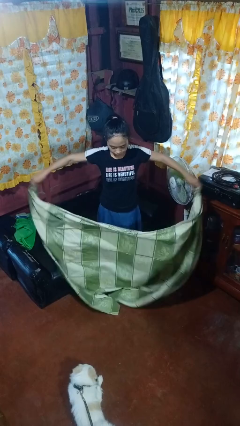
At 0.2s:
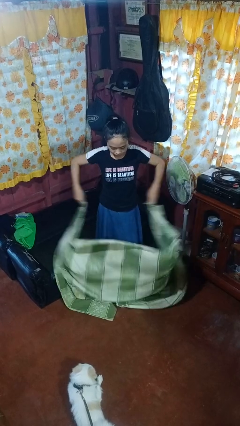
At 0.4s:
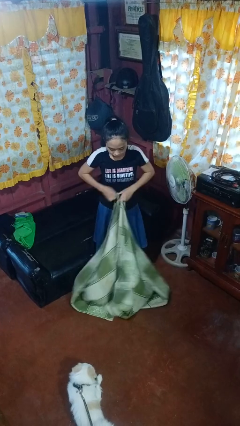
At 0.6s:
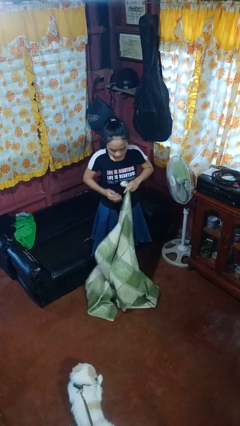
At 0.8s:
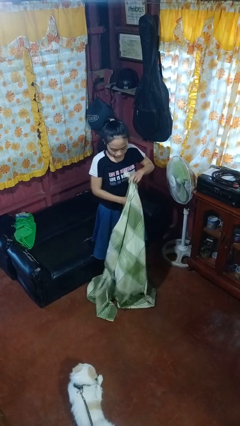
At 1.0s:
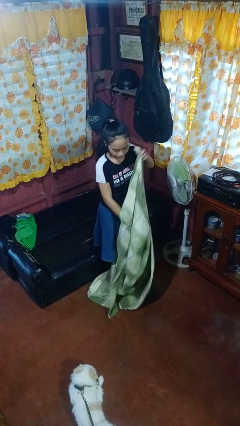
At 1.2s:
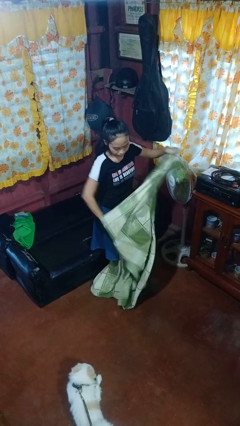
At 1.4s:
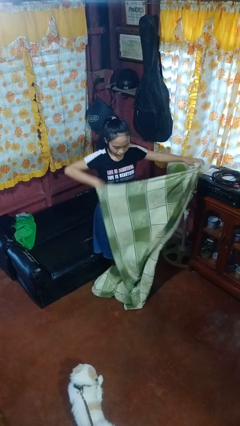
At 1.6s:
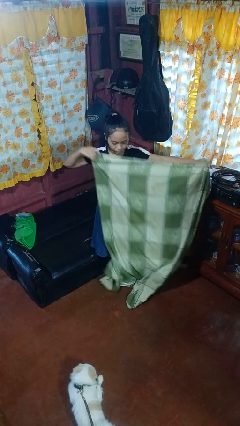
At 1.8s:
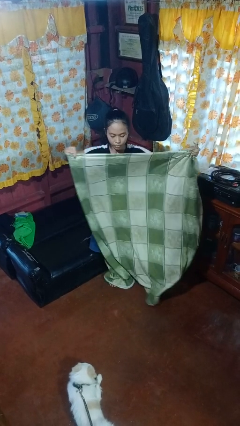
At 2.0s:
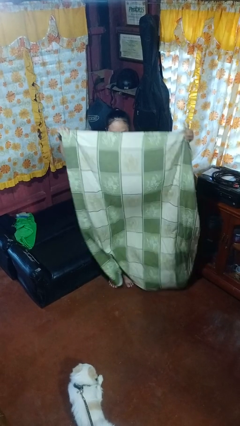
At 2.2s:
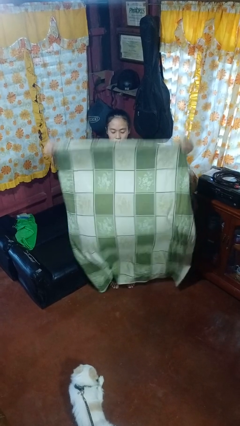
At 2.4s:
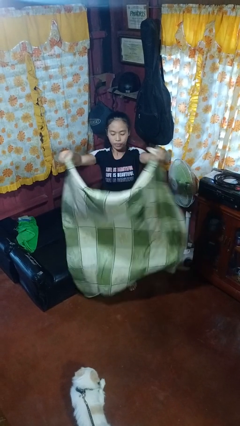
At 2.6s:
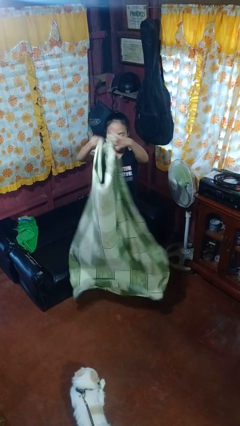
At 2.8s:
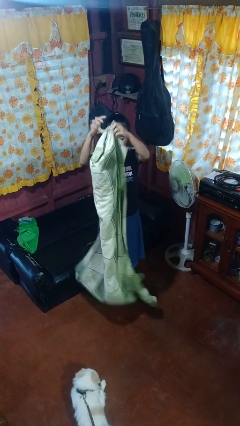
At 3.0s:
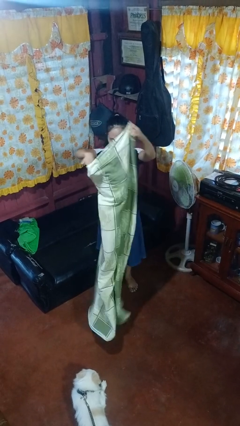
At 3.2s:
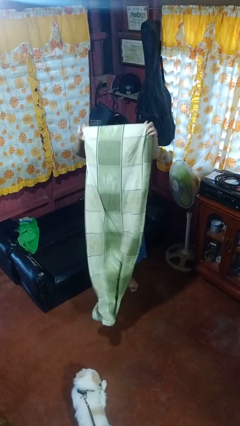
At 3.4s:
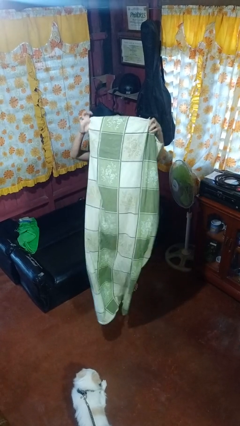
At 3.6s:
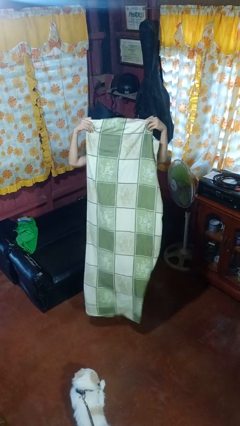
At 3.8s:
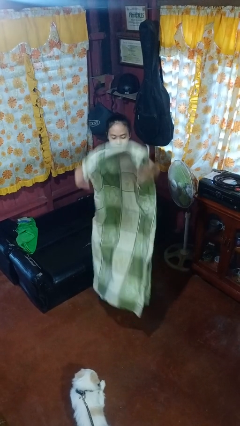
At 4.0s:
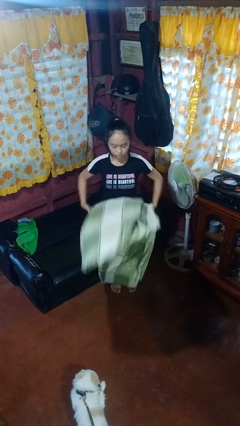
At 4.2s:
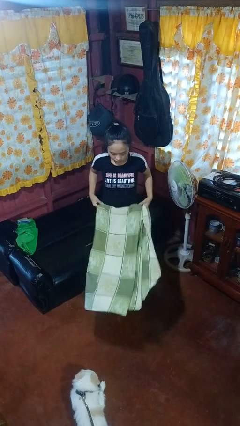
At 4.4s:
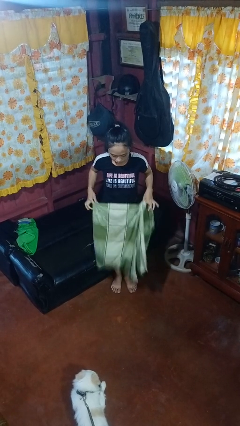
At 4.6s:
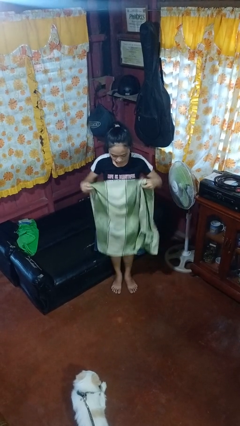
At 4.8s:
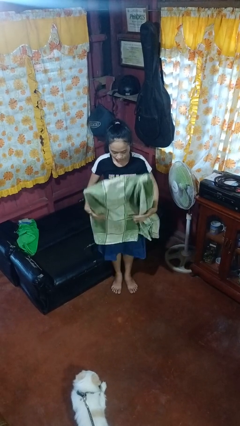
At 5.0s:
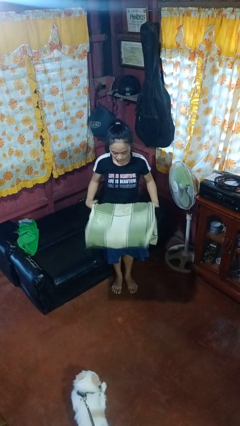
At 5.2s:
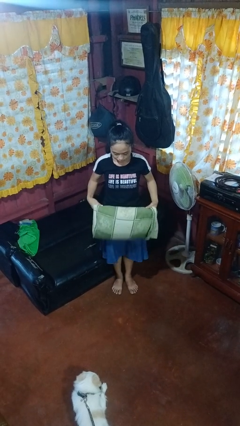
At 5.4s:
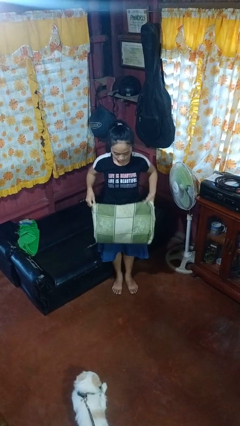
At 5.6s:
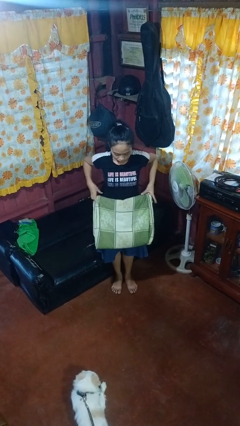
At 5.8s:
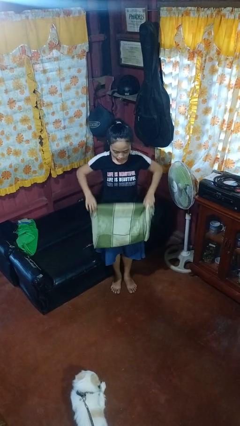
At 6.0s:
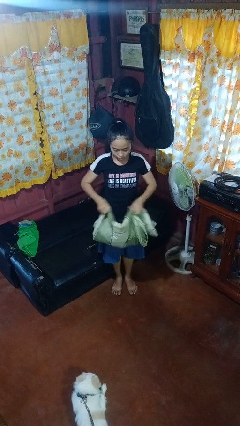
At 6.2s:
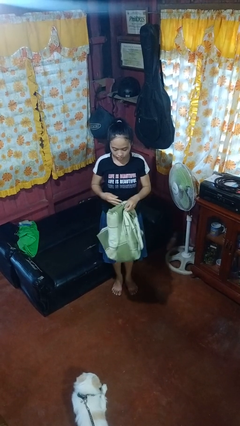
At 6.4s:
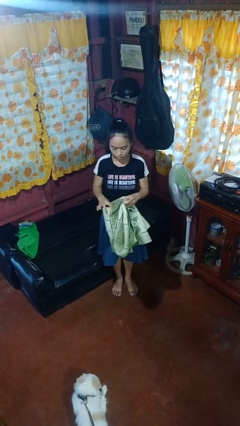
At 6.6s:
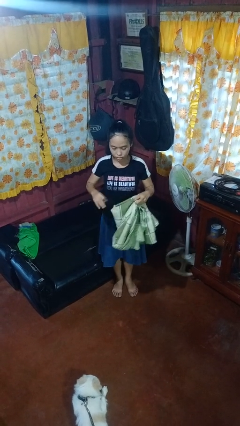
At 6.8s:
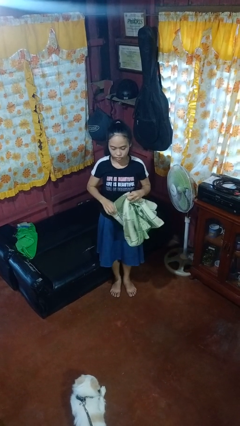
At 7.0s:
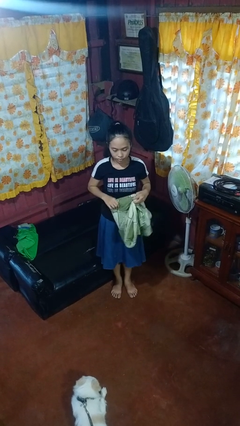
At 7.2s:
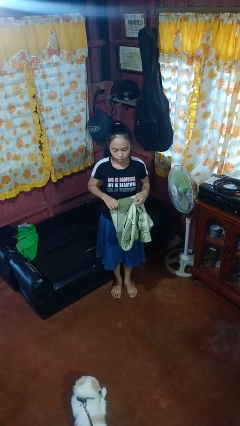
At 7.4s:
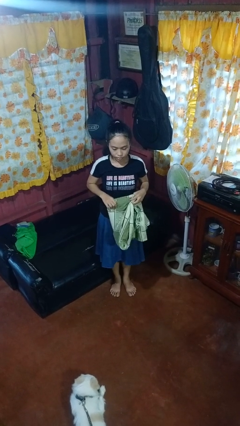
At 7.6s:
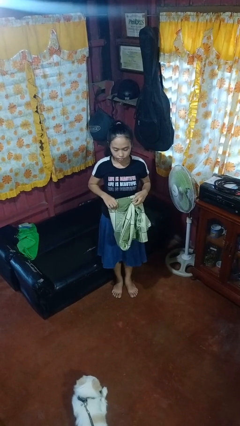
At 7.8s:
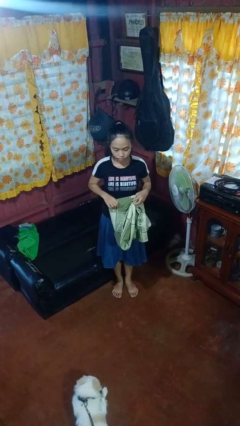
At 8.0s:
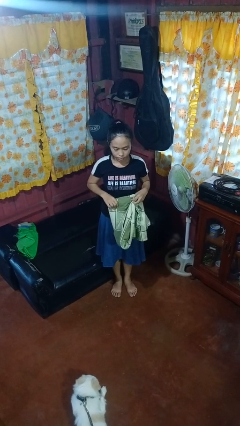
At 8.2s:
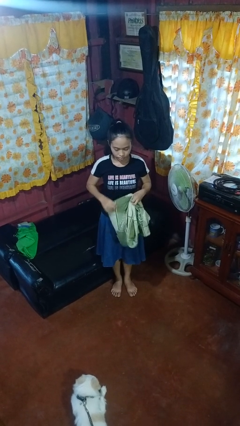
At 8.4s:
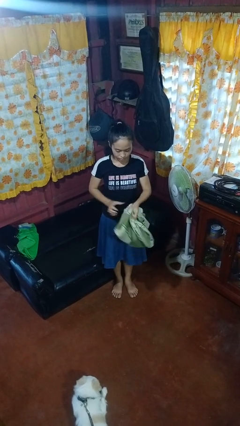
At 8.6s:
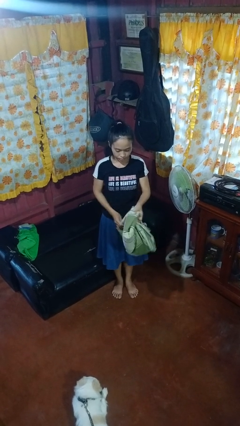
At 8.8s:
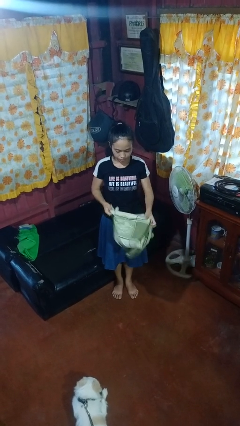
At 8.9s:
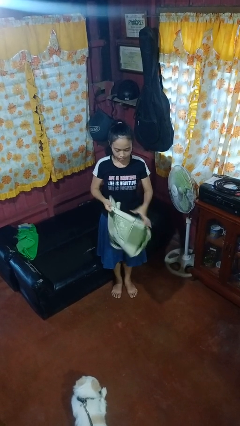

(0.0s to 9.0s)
person folds blanket

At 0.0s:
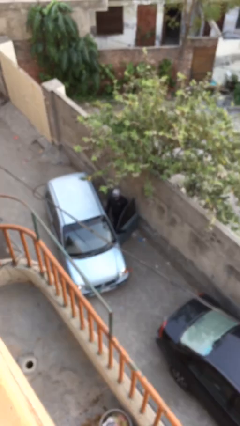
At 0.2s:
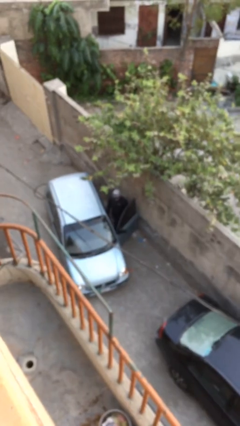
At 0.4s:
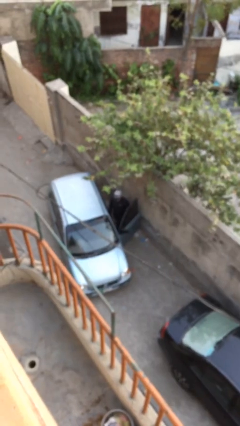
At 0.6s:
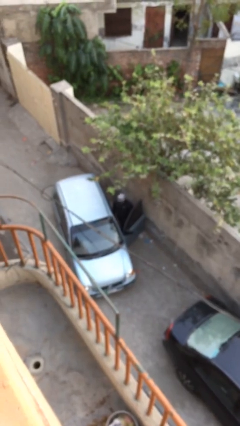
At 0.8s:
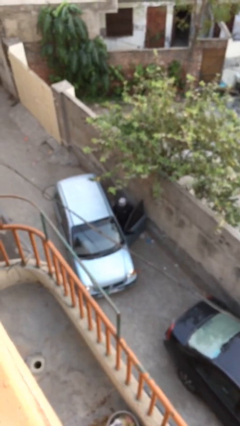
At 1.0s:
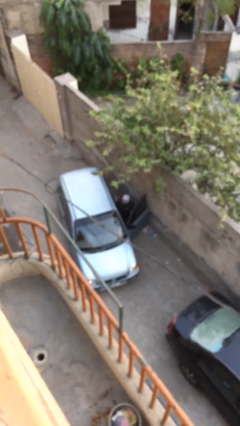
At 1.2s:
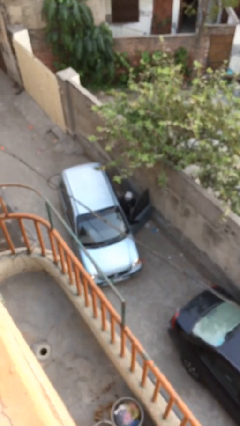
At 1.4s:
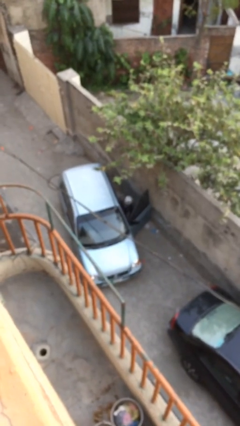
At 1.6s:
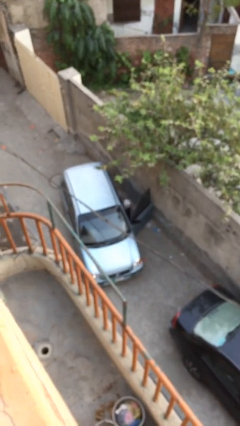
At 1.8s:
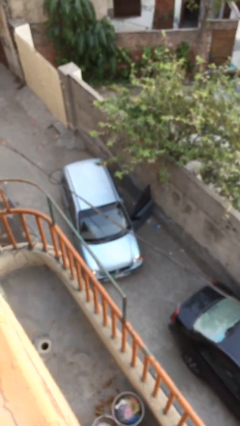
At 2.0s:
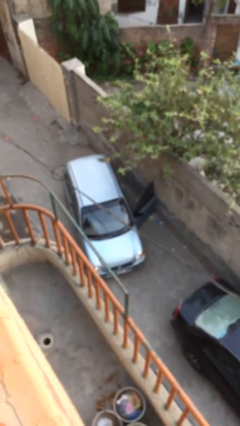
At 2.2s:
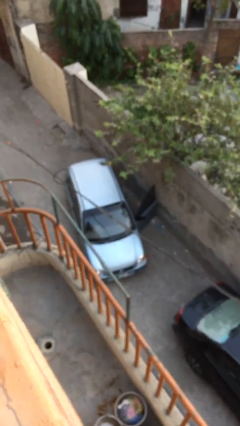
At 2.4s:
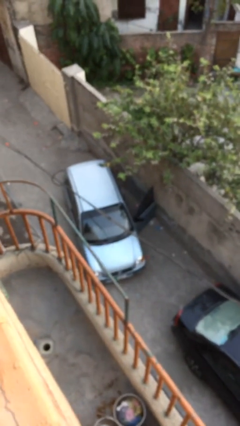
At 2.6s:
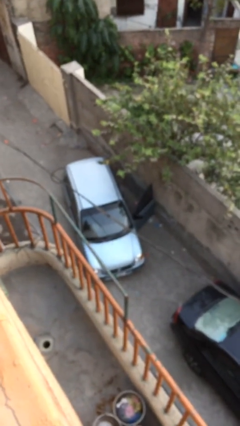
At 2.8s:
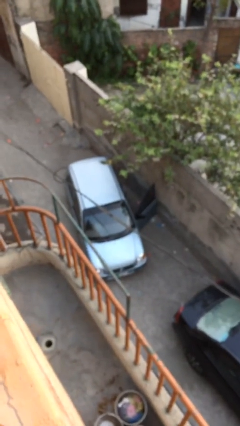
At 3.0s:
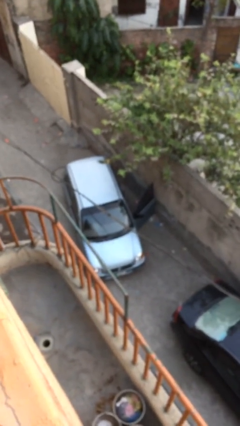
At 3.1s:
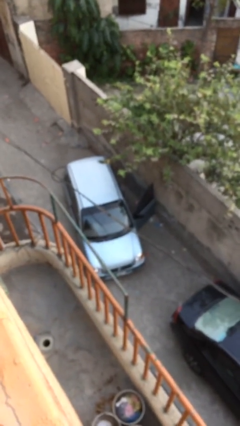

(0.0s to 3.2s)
person enters car

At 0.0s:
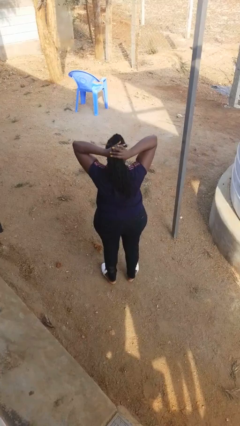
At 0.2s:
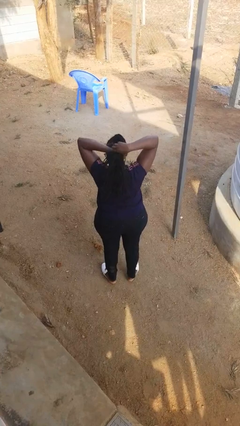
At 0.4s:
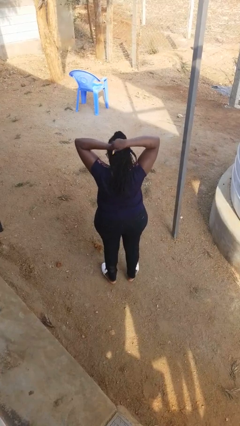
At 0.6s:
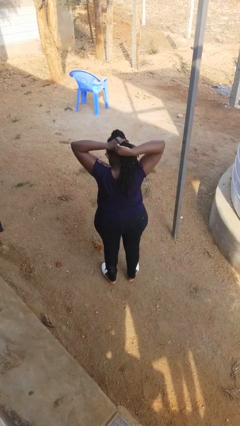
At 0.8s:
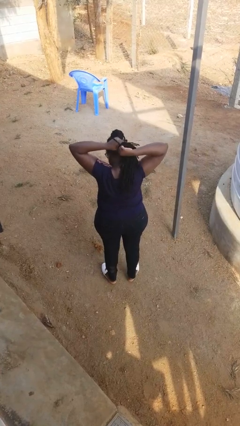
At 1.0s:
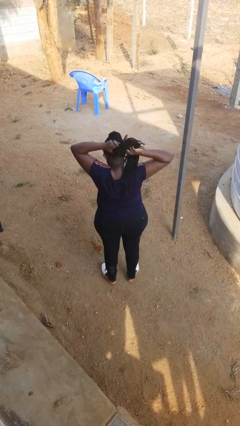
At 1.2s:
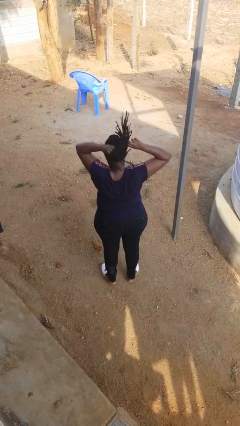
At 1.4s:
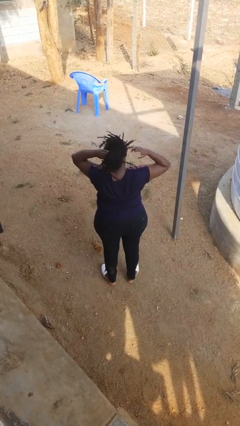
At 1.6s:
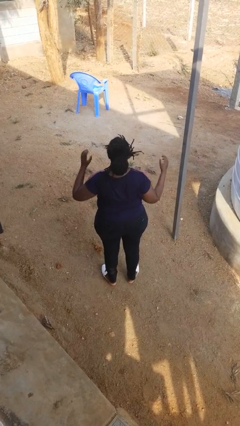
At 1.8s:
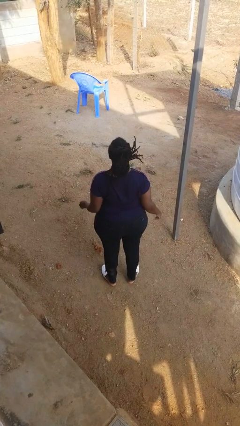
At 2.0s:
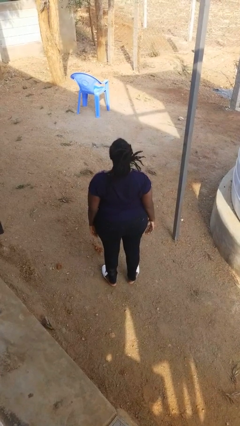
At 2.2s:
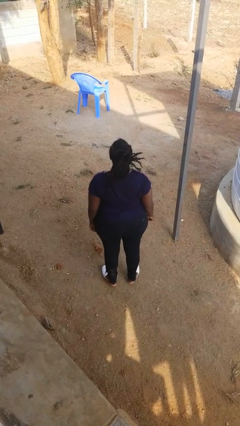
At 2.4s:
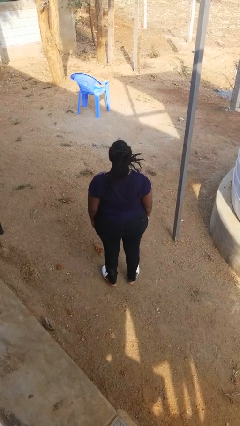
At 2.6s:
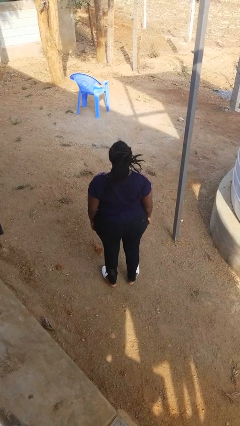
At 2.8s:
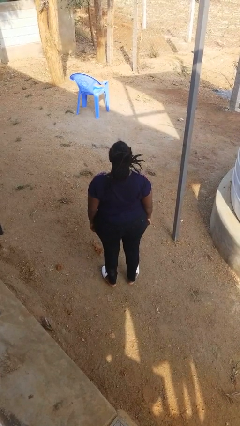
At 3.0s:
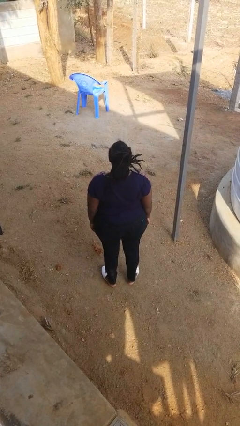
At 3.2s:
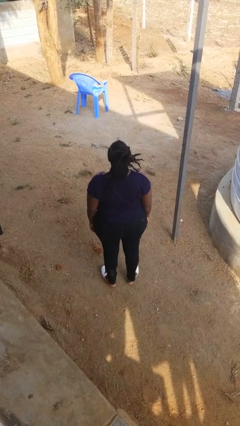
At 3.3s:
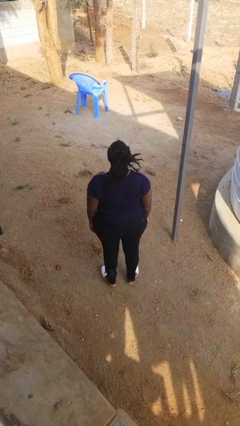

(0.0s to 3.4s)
person puts hair in ponytail

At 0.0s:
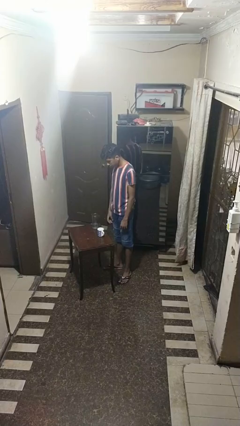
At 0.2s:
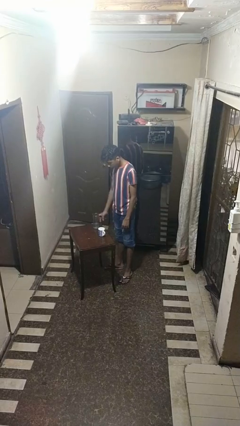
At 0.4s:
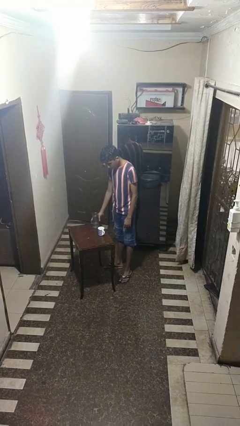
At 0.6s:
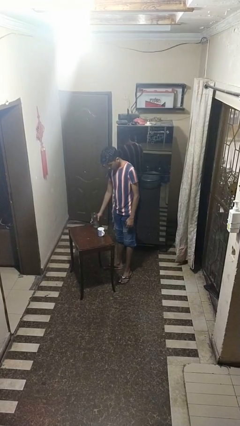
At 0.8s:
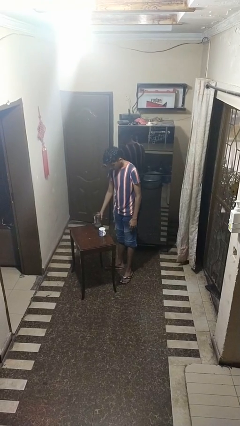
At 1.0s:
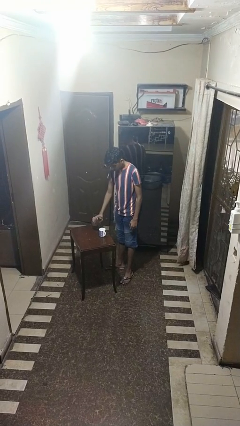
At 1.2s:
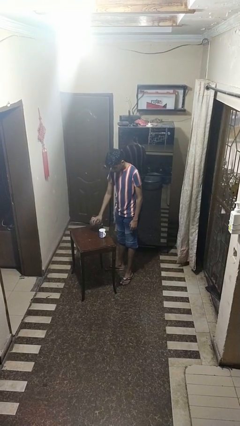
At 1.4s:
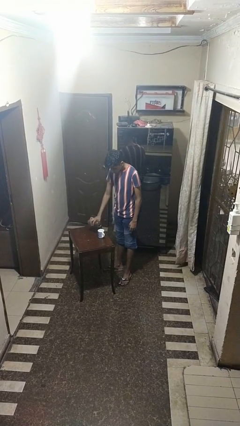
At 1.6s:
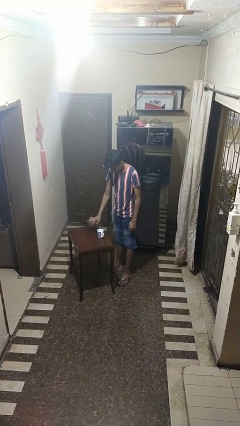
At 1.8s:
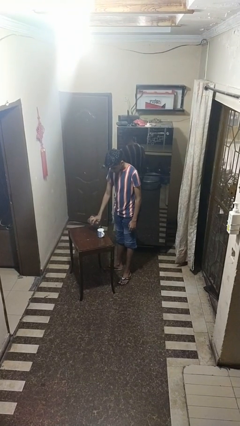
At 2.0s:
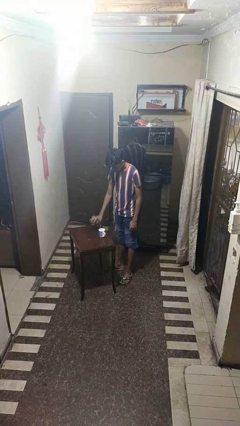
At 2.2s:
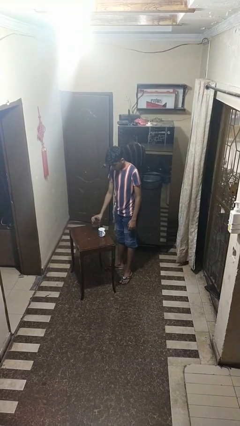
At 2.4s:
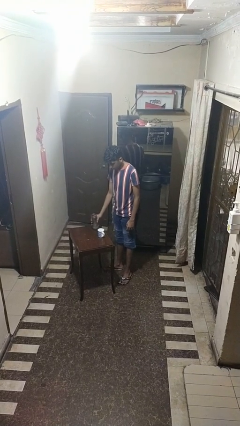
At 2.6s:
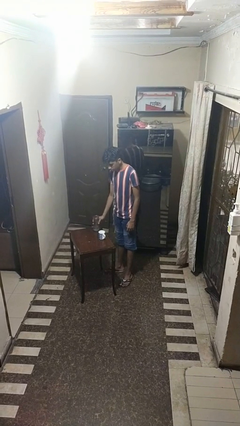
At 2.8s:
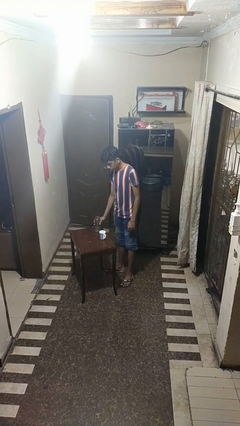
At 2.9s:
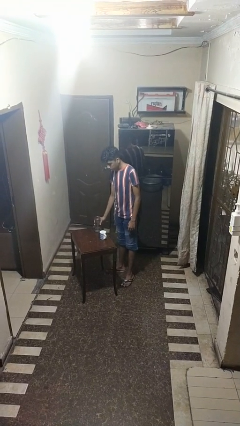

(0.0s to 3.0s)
person pours liquid into cup
